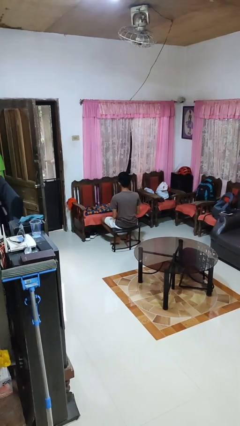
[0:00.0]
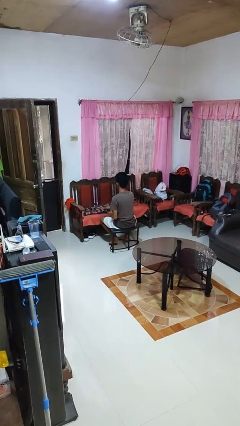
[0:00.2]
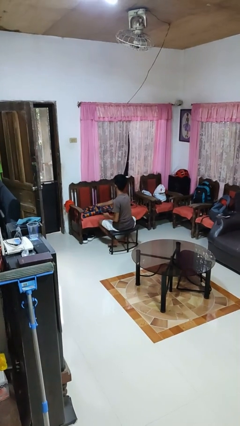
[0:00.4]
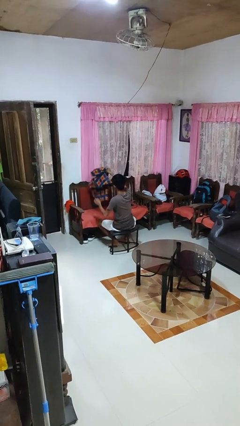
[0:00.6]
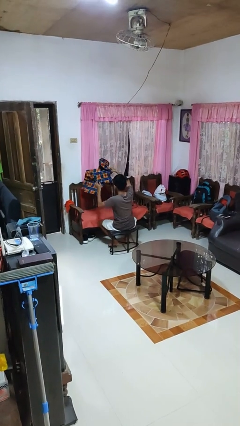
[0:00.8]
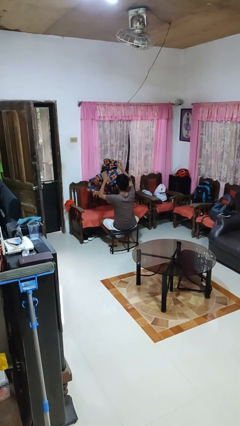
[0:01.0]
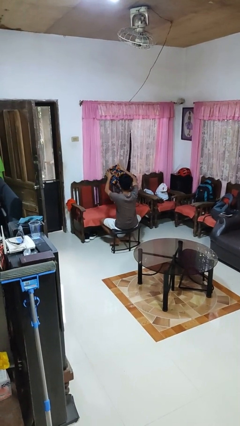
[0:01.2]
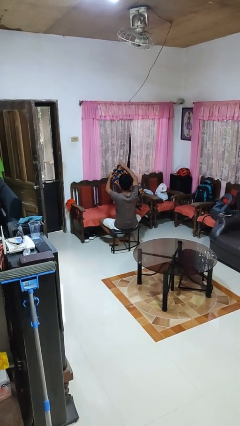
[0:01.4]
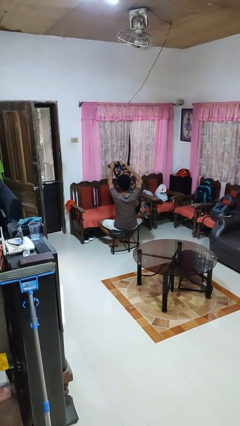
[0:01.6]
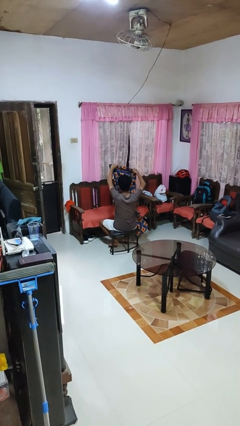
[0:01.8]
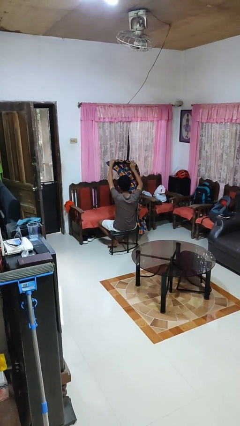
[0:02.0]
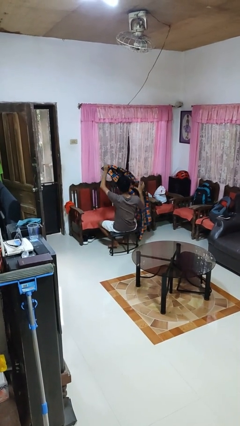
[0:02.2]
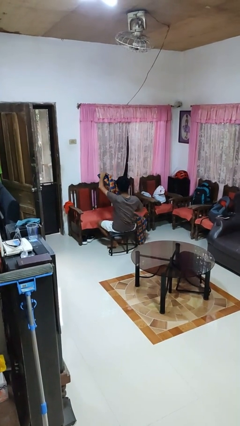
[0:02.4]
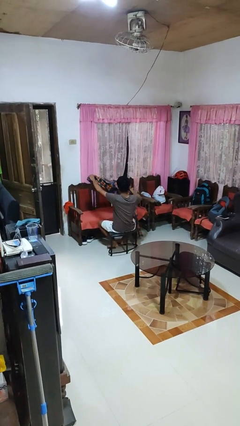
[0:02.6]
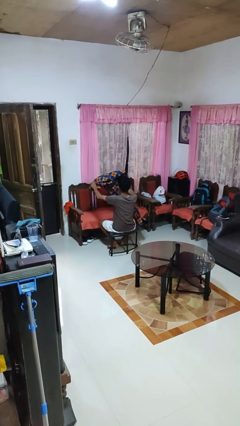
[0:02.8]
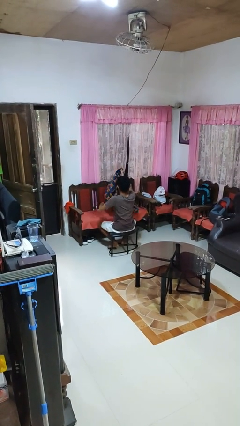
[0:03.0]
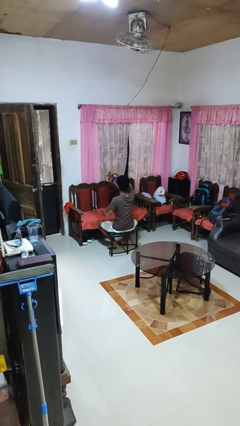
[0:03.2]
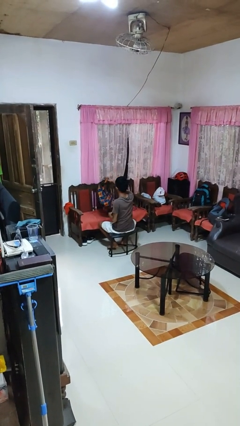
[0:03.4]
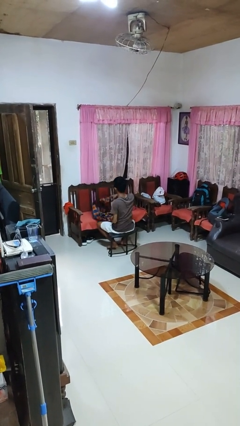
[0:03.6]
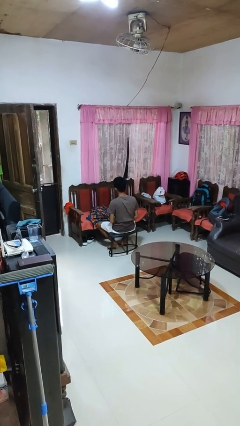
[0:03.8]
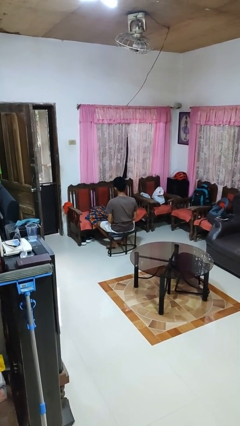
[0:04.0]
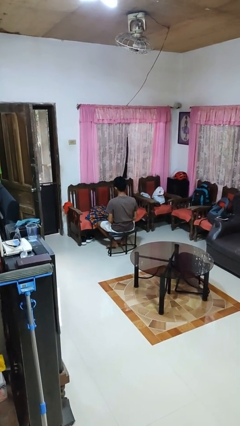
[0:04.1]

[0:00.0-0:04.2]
person unfolds blanket

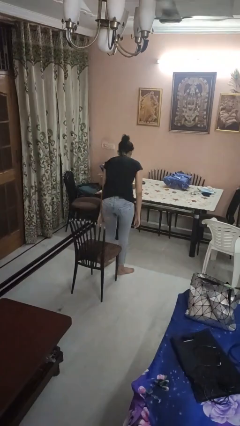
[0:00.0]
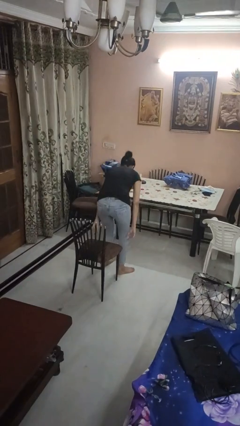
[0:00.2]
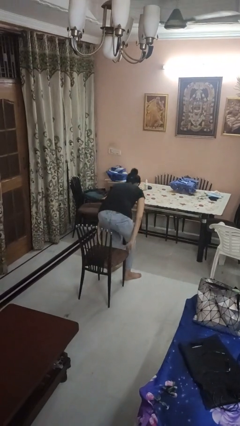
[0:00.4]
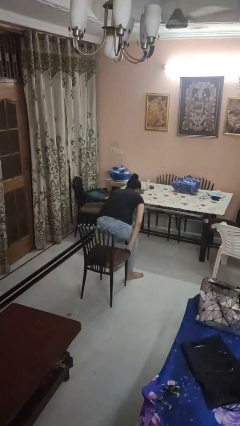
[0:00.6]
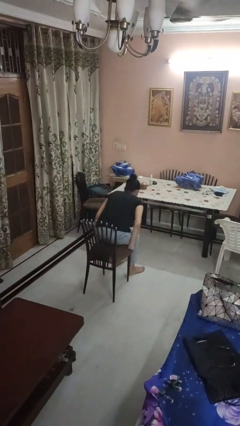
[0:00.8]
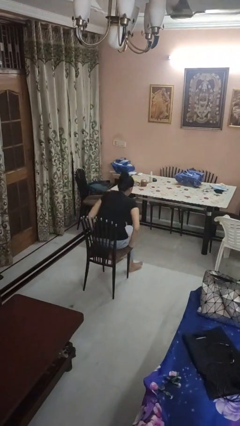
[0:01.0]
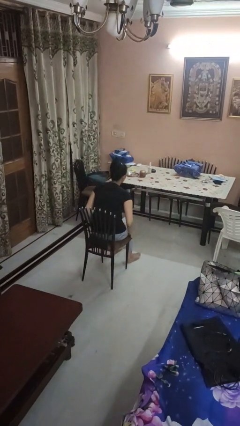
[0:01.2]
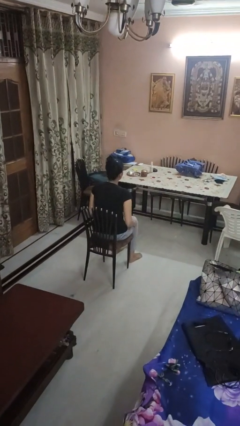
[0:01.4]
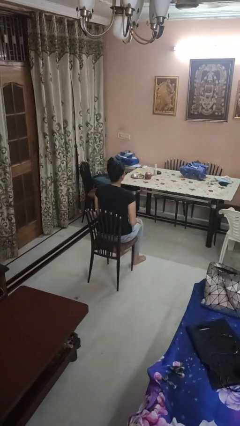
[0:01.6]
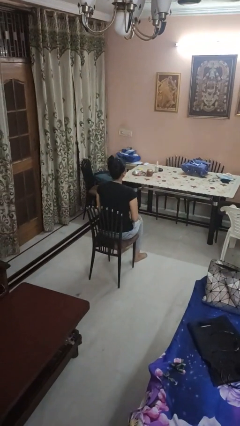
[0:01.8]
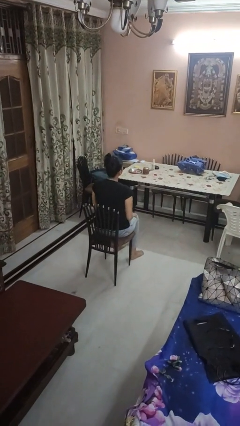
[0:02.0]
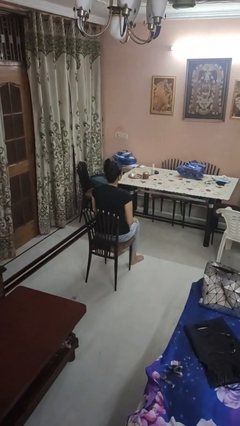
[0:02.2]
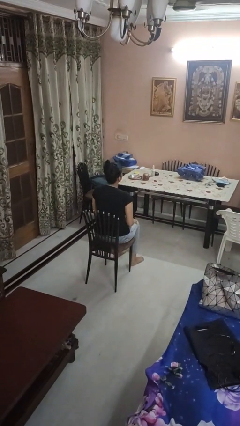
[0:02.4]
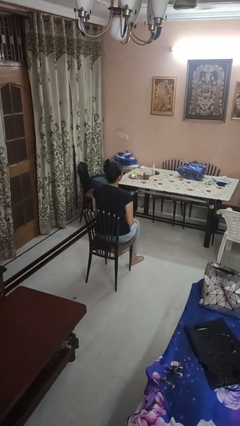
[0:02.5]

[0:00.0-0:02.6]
person sits down

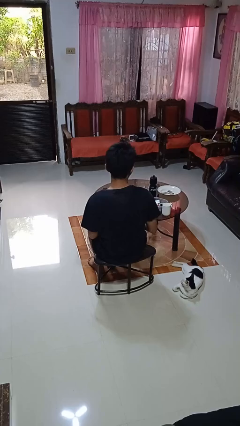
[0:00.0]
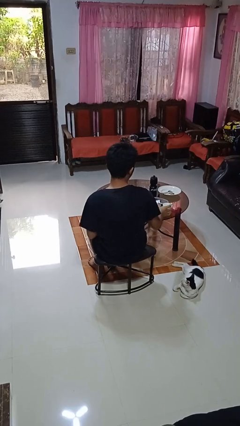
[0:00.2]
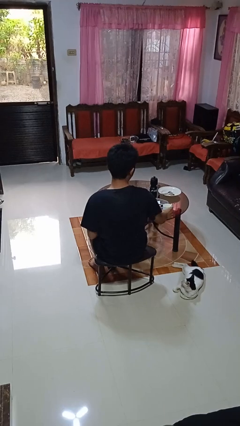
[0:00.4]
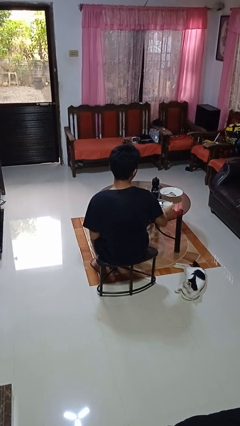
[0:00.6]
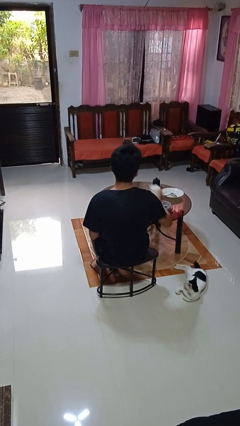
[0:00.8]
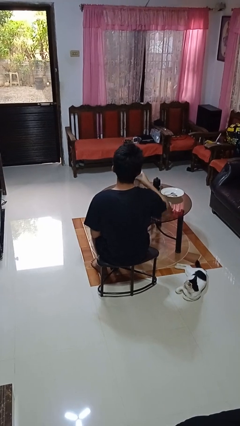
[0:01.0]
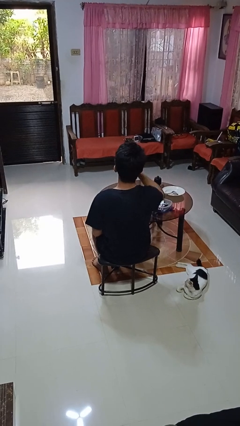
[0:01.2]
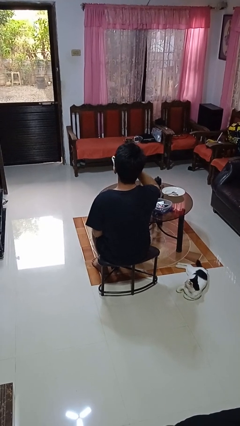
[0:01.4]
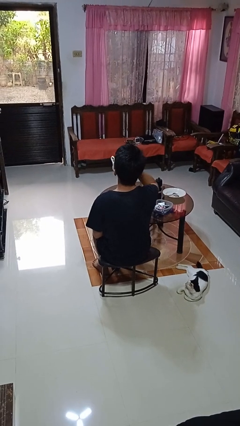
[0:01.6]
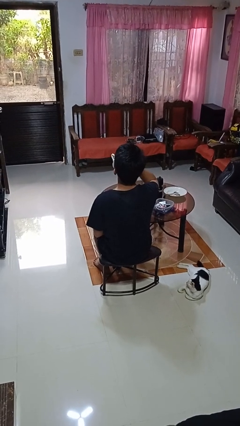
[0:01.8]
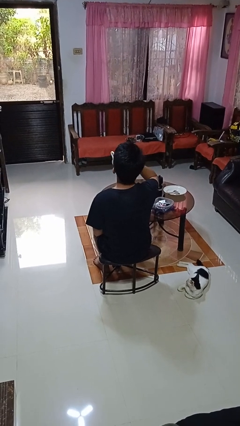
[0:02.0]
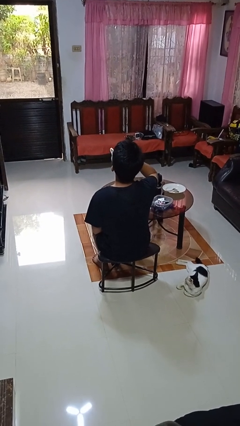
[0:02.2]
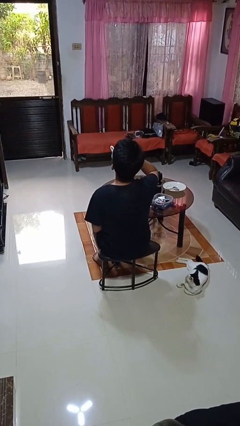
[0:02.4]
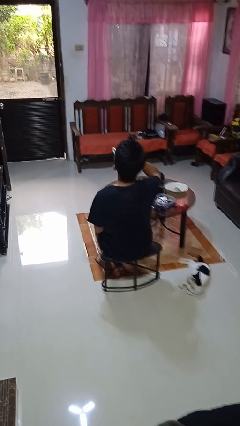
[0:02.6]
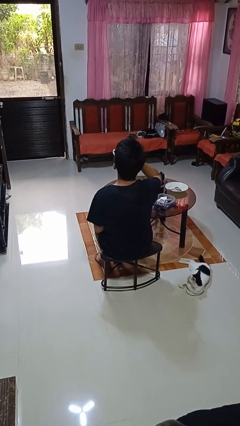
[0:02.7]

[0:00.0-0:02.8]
person drinks from cup

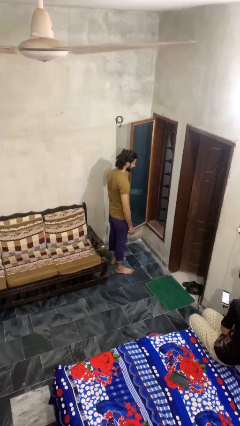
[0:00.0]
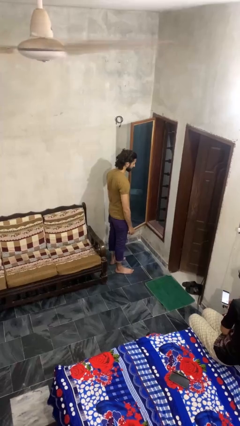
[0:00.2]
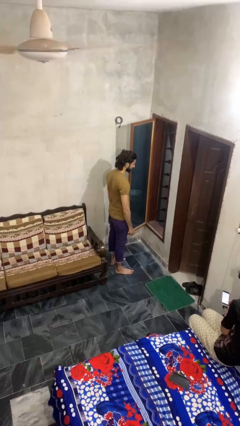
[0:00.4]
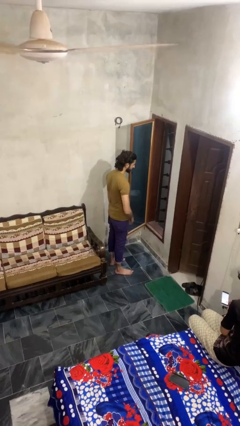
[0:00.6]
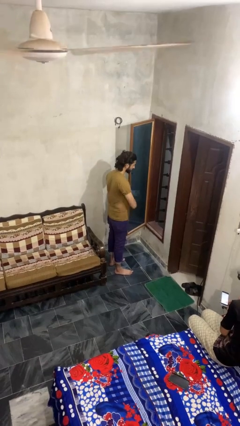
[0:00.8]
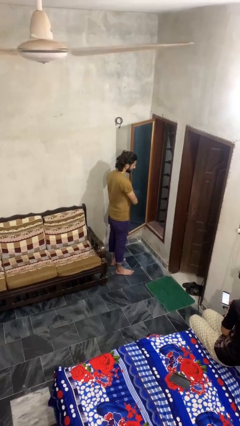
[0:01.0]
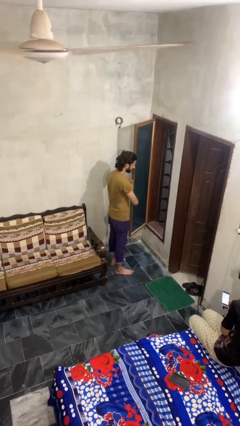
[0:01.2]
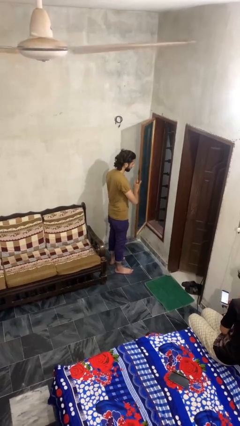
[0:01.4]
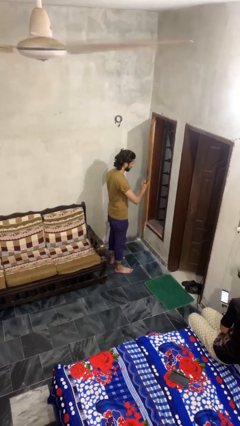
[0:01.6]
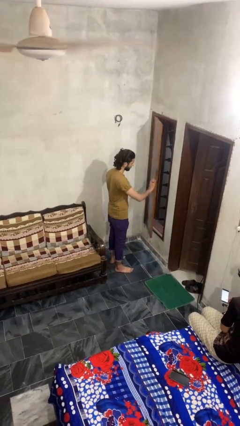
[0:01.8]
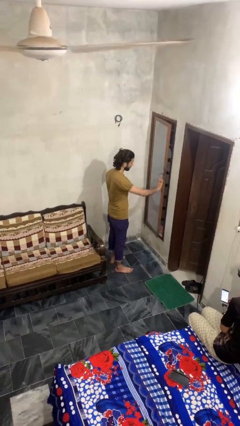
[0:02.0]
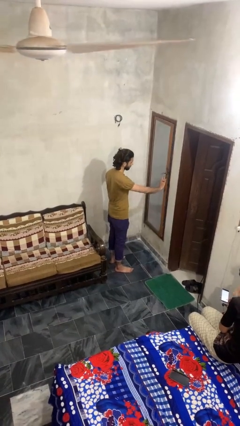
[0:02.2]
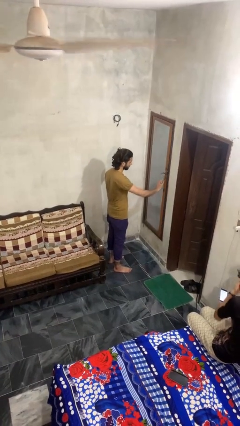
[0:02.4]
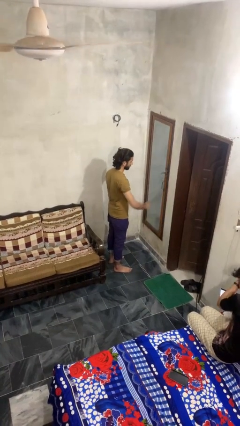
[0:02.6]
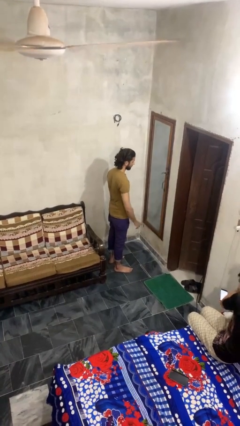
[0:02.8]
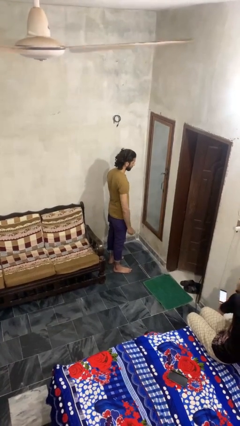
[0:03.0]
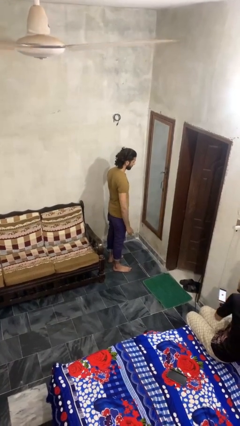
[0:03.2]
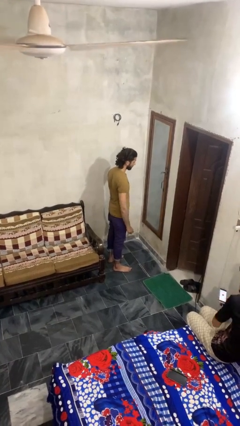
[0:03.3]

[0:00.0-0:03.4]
person closes home window

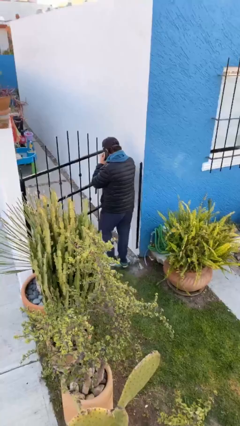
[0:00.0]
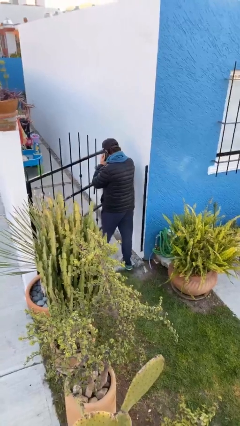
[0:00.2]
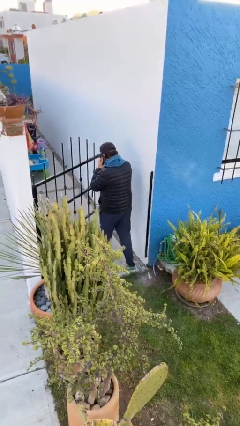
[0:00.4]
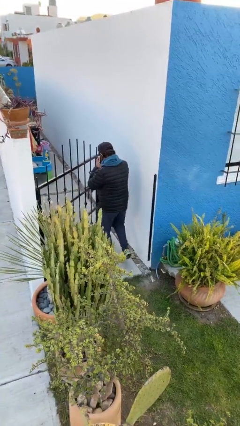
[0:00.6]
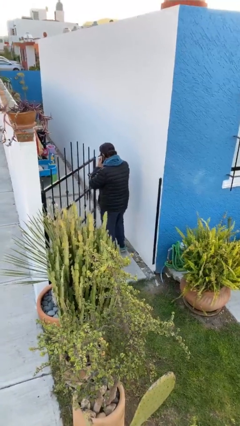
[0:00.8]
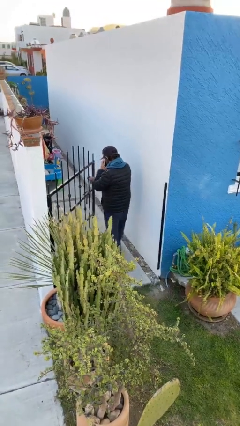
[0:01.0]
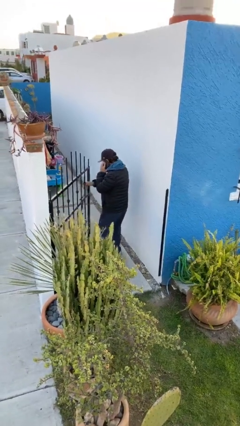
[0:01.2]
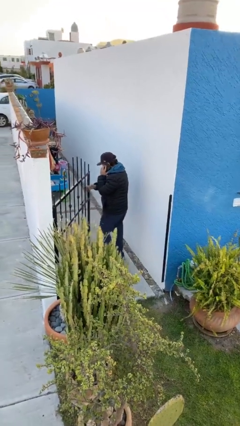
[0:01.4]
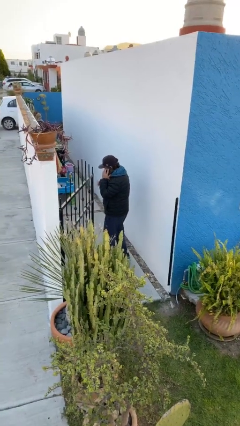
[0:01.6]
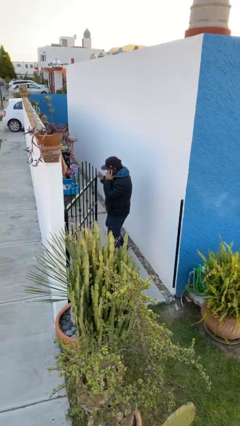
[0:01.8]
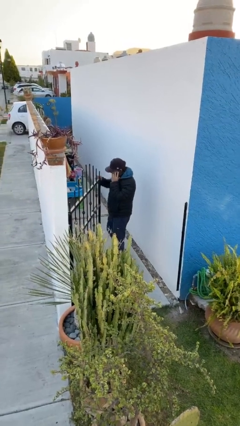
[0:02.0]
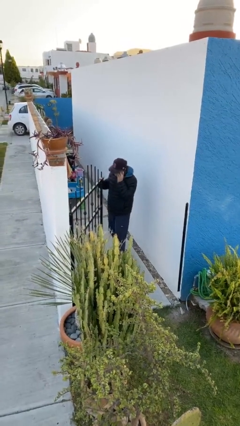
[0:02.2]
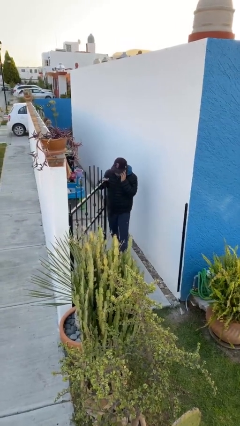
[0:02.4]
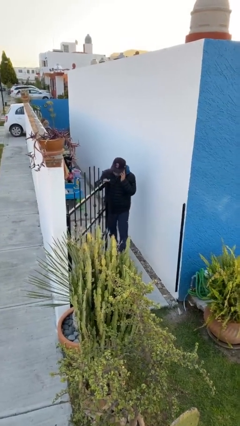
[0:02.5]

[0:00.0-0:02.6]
person exits scene through structure

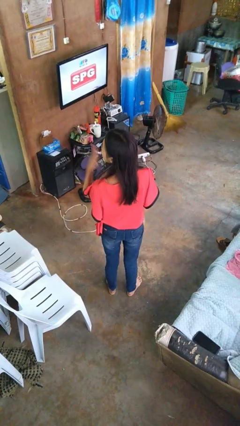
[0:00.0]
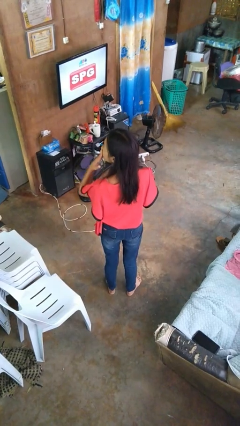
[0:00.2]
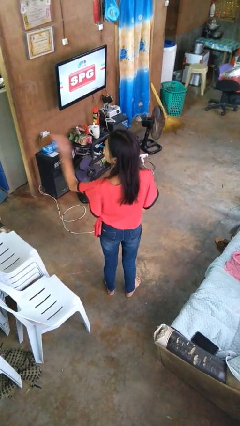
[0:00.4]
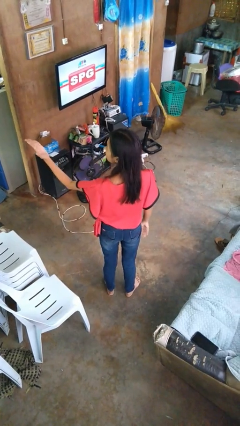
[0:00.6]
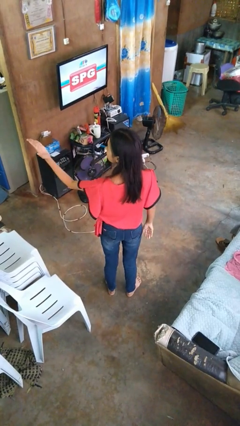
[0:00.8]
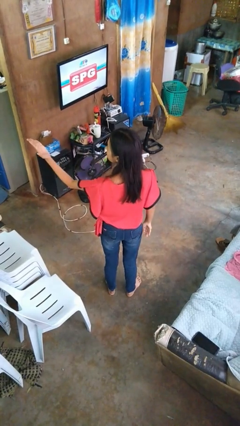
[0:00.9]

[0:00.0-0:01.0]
person gestures blow kiss

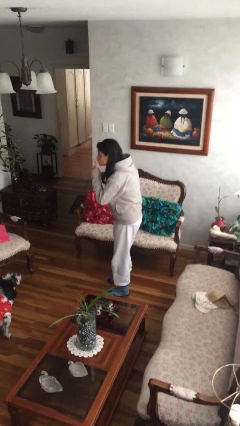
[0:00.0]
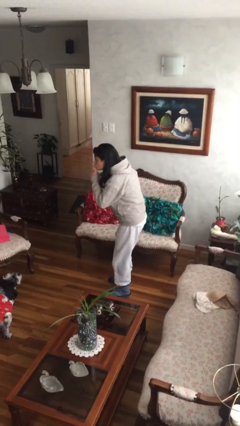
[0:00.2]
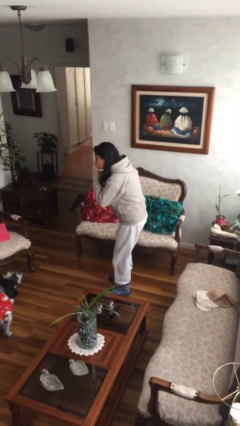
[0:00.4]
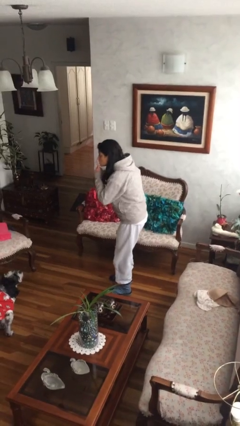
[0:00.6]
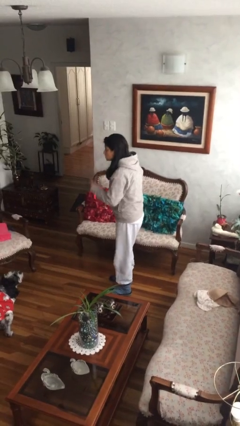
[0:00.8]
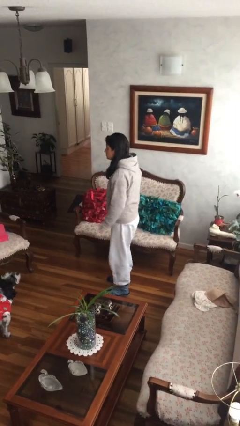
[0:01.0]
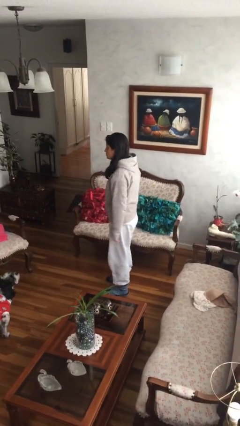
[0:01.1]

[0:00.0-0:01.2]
person gestures be quiet
